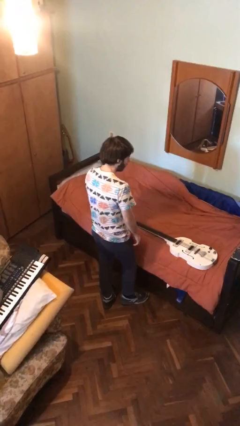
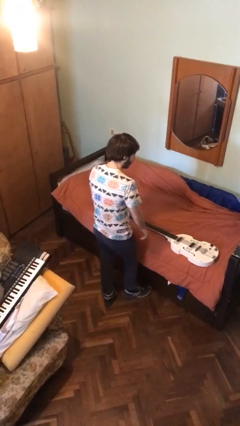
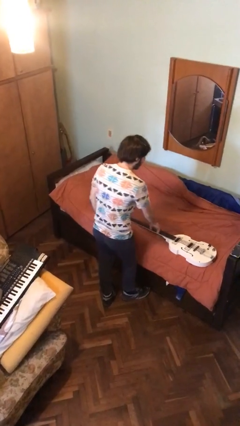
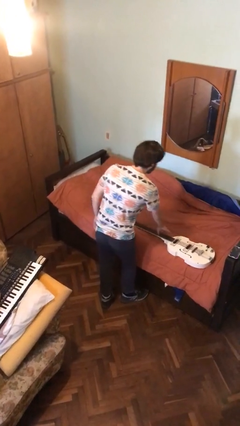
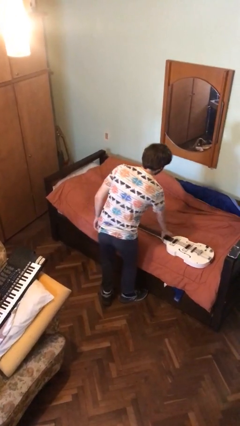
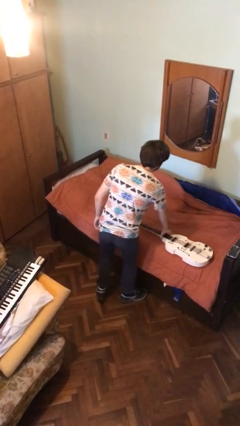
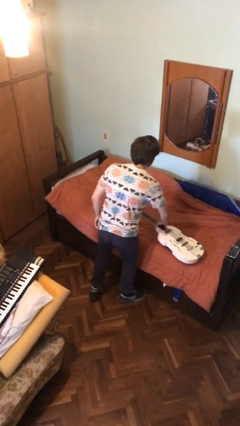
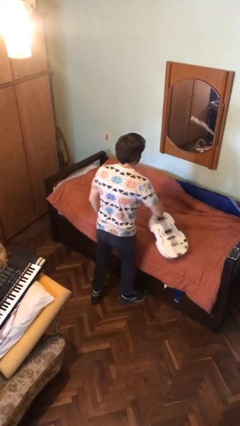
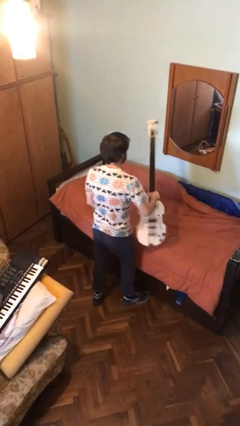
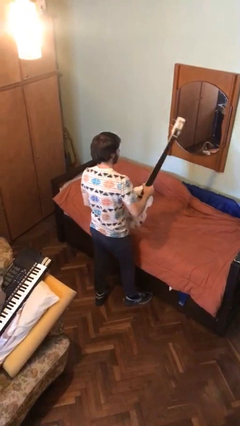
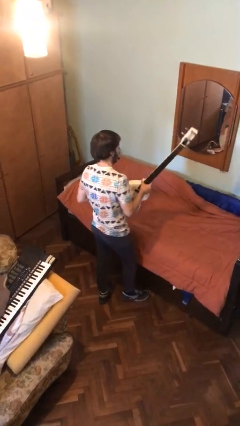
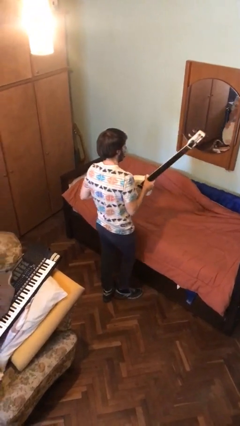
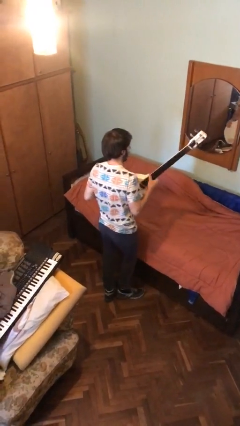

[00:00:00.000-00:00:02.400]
person picks up object from bed

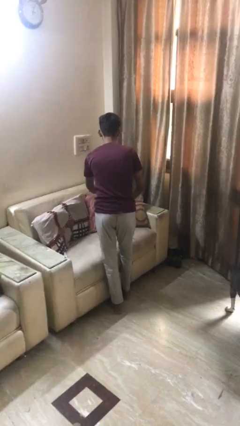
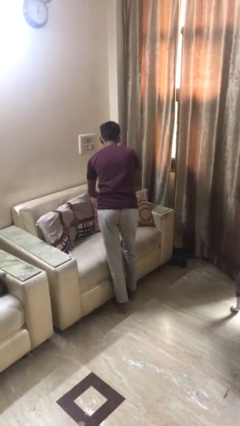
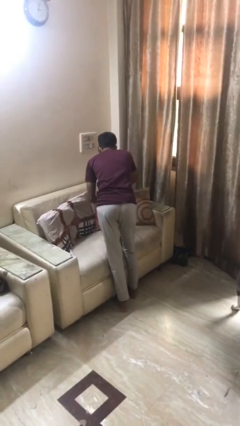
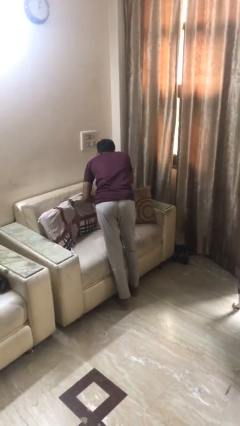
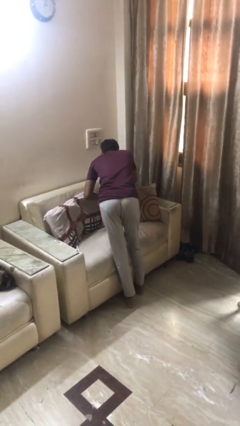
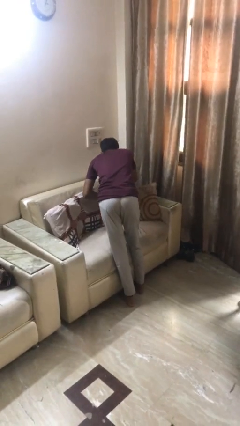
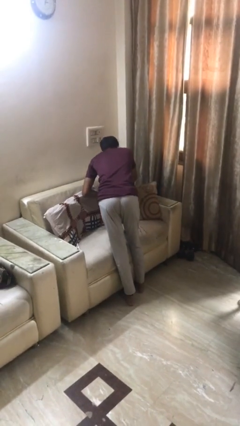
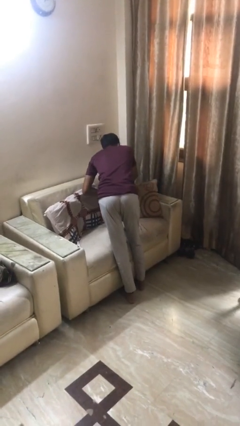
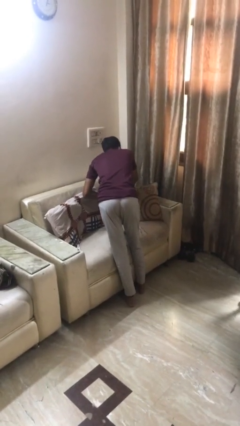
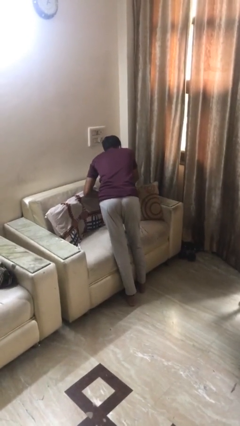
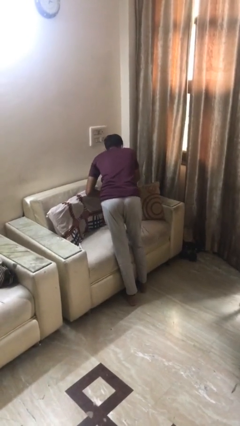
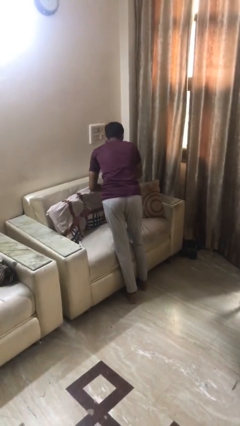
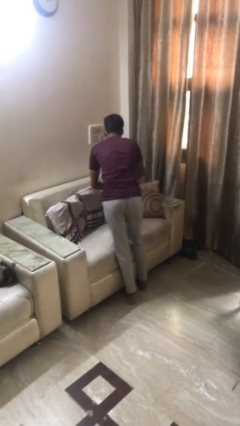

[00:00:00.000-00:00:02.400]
person searches in couch

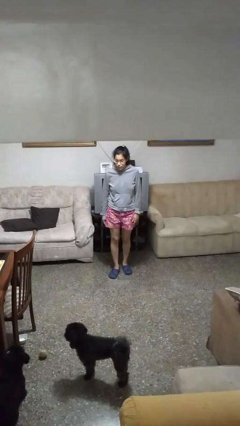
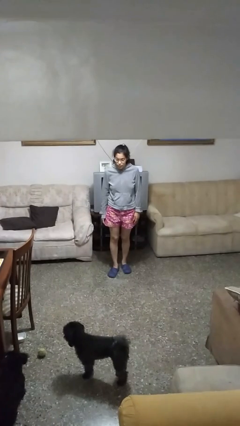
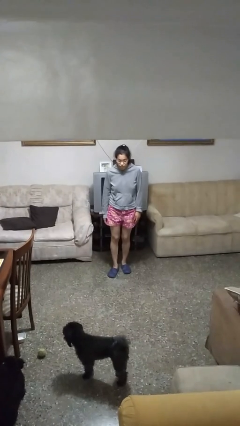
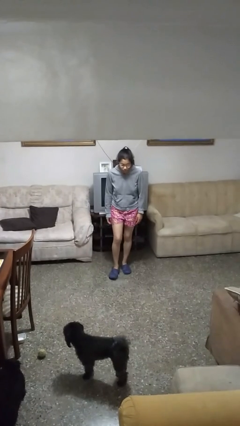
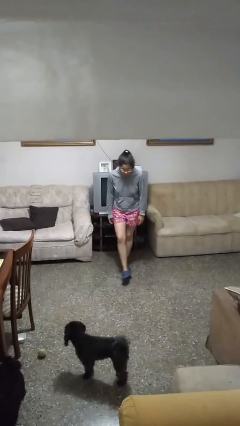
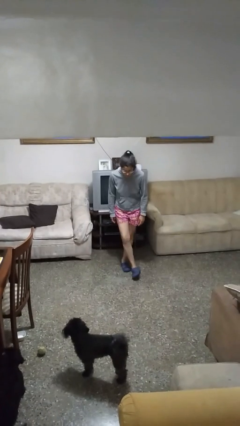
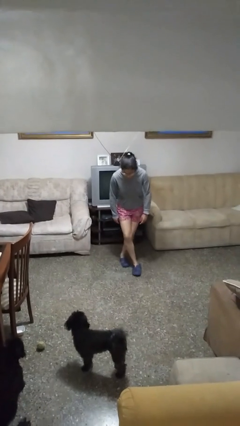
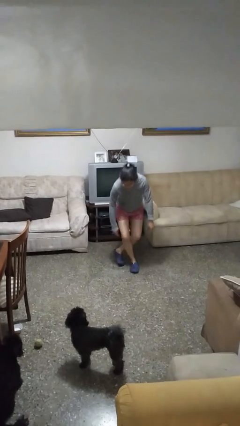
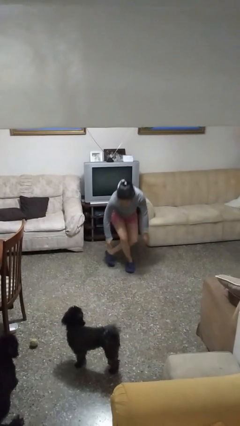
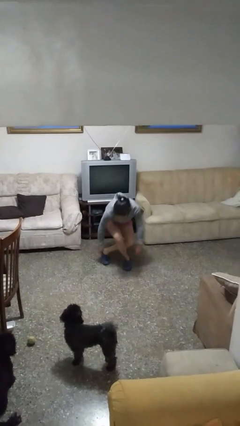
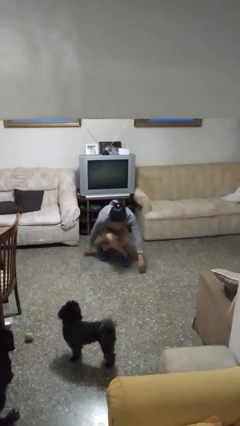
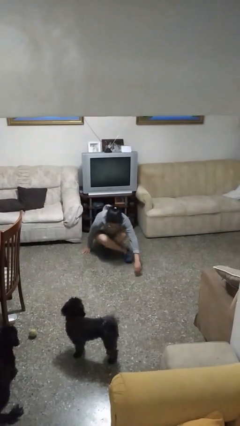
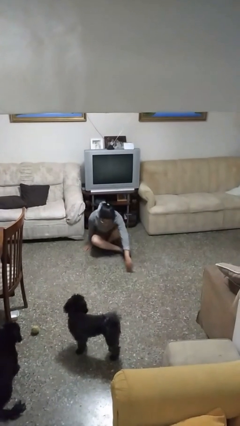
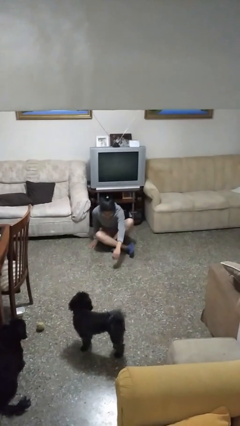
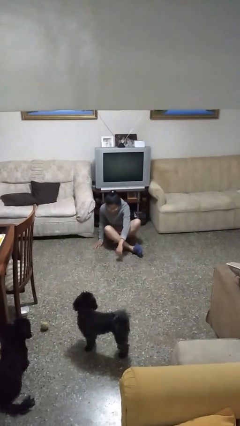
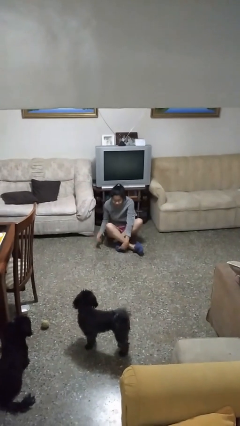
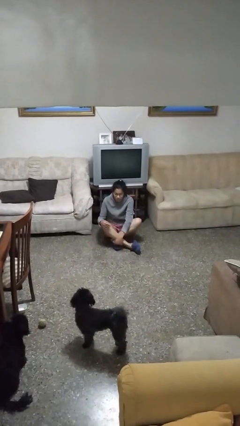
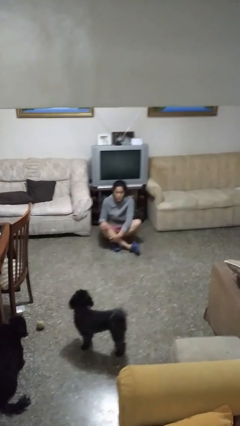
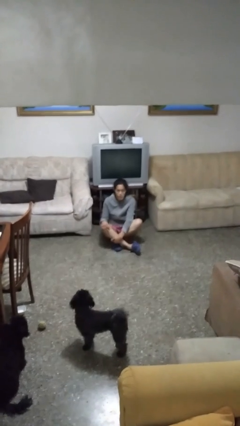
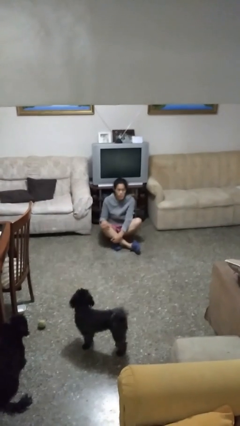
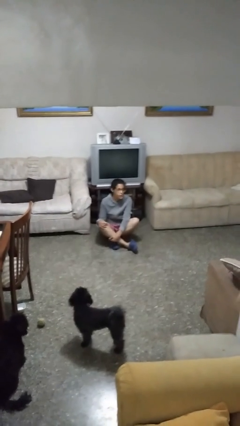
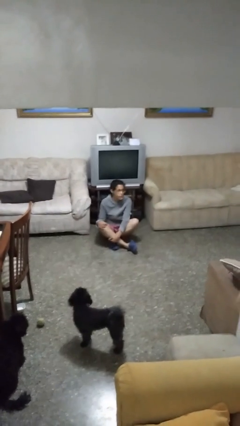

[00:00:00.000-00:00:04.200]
person sits crisscross

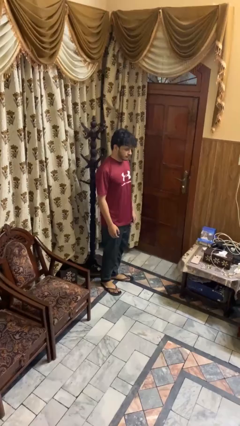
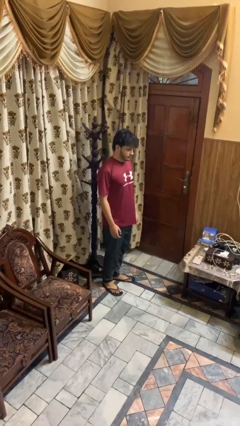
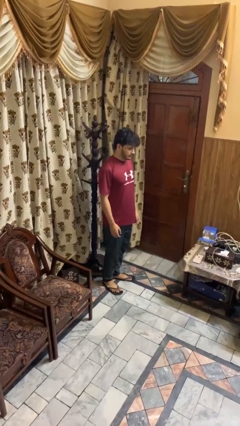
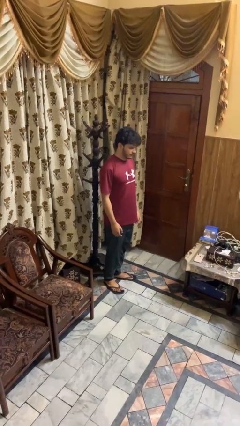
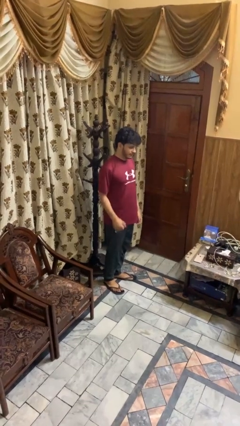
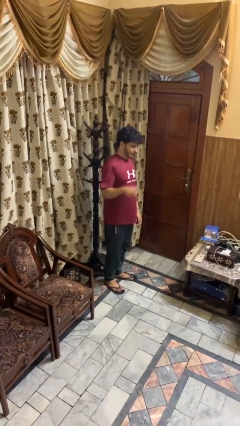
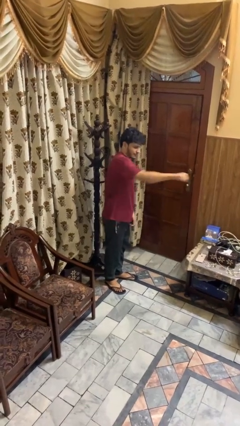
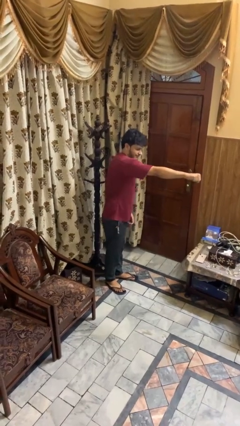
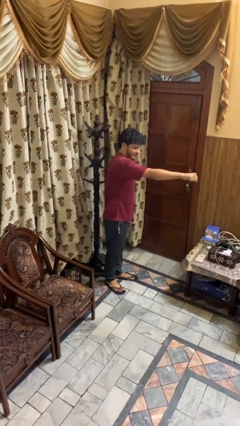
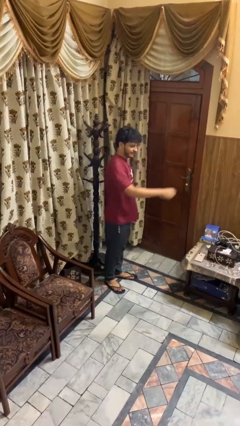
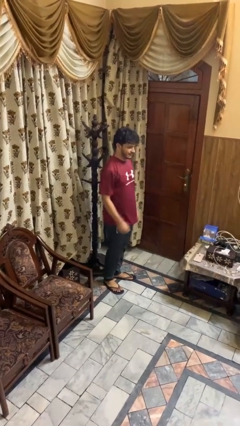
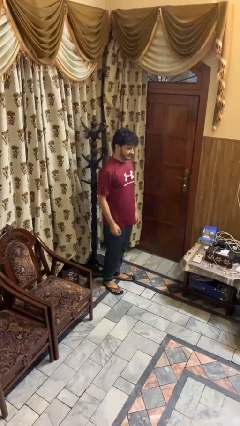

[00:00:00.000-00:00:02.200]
person karate chop

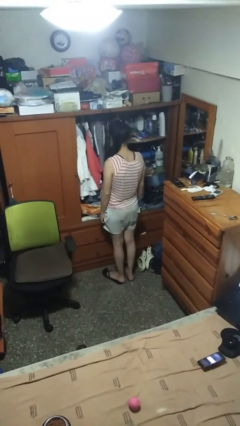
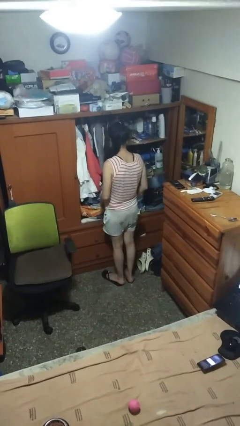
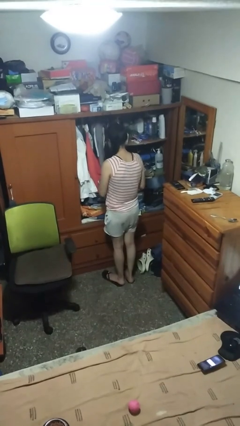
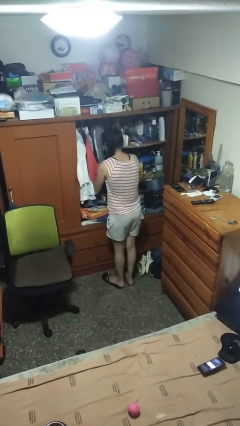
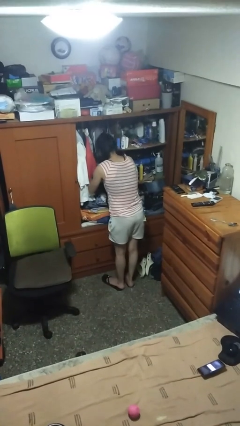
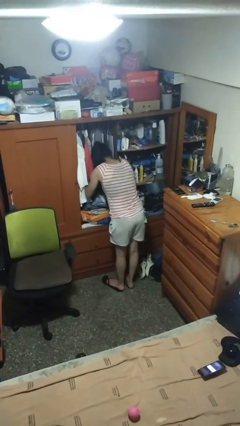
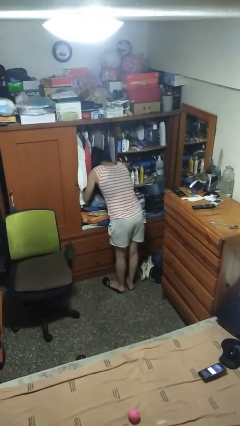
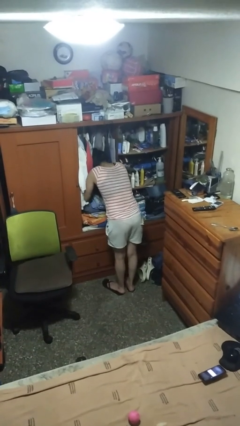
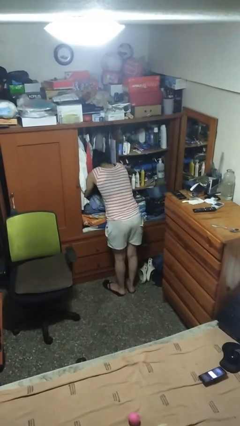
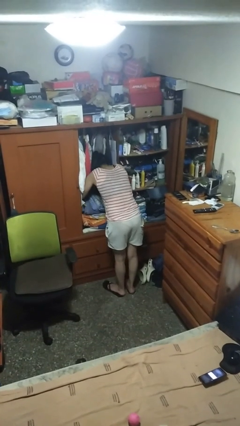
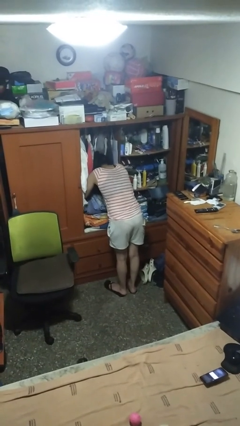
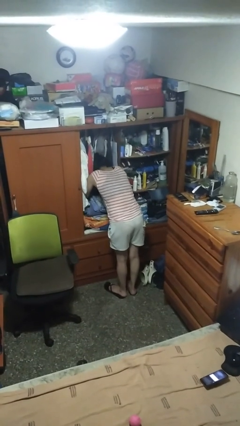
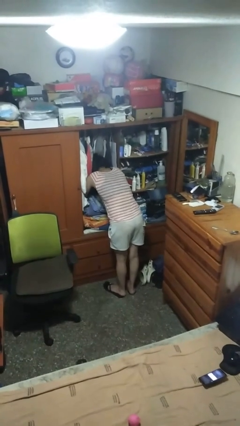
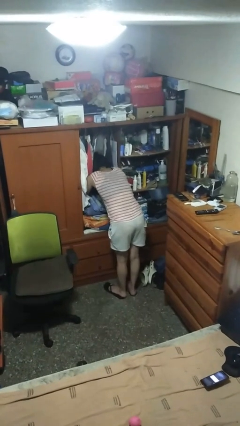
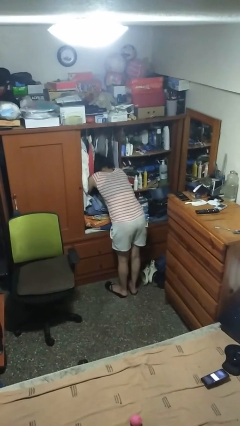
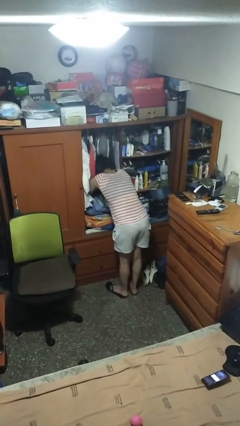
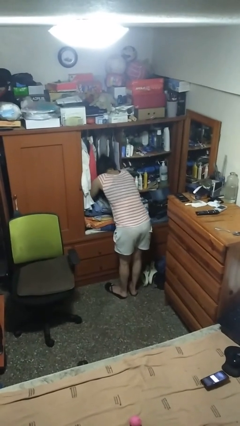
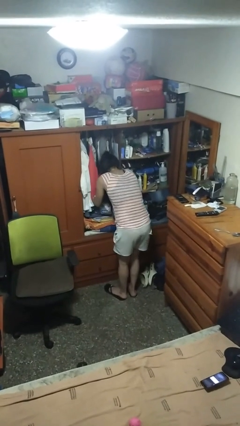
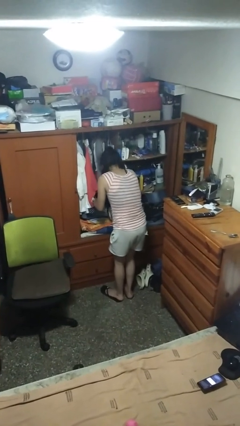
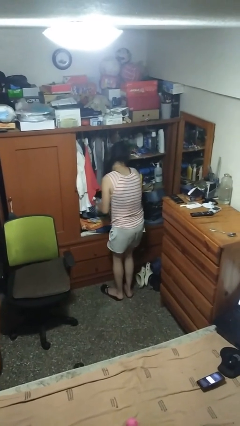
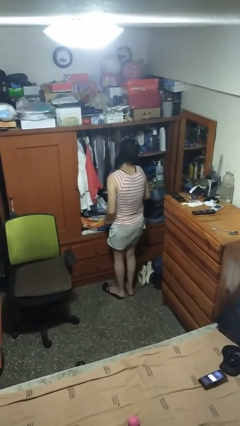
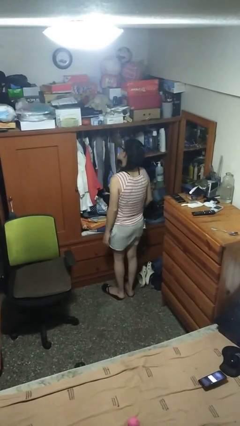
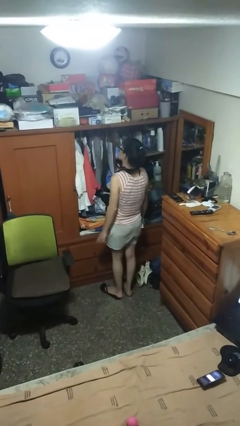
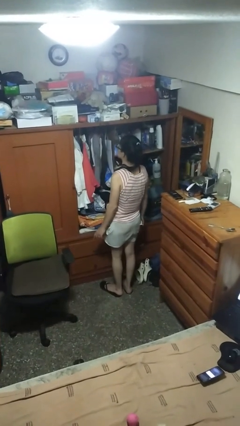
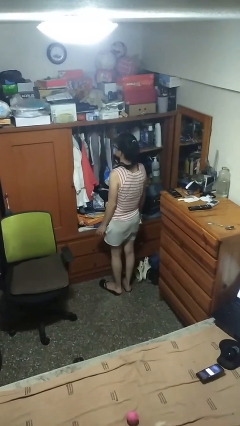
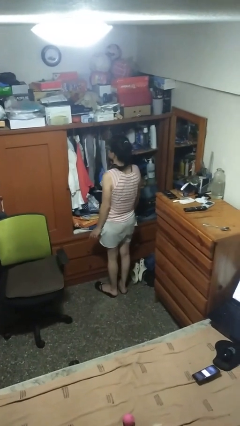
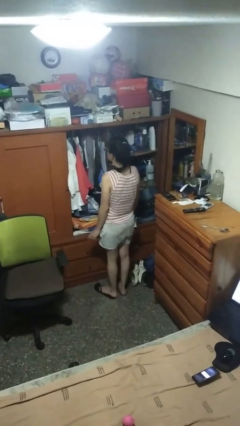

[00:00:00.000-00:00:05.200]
person searches in cabinet

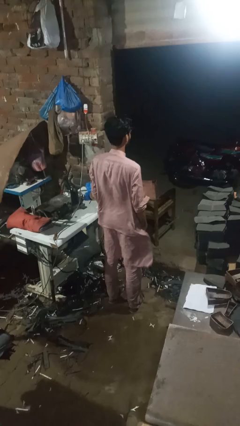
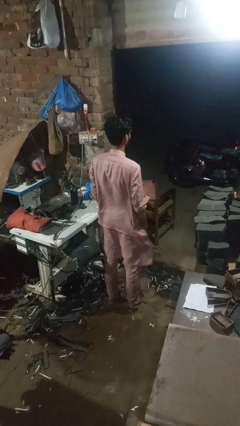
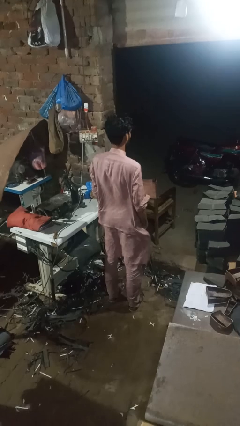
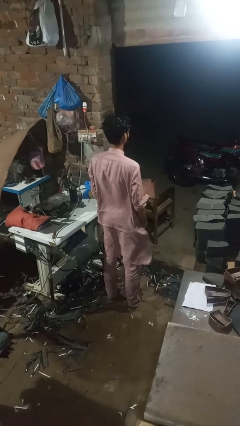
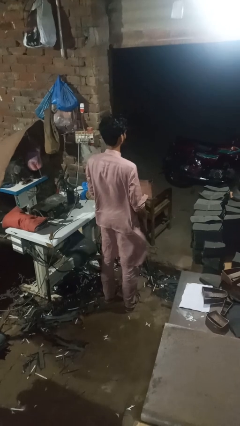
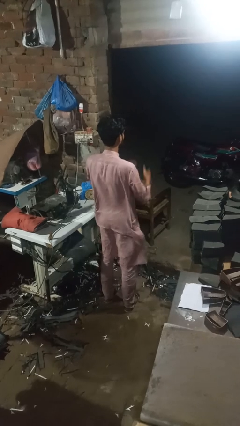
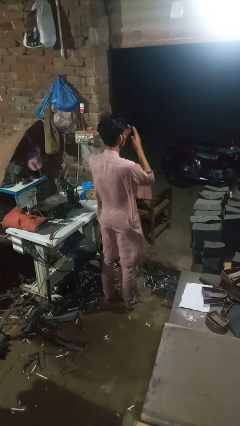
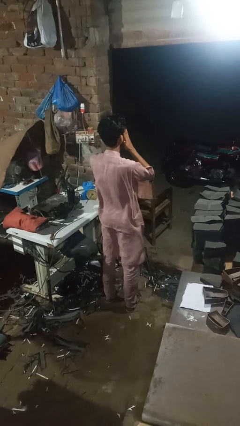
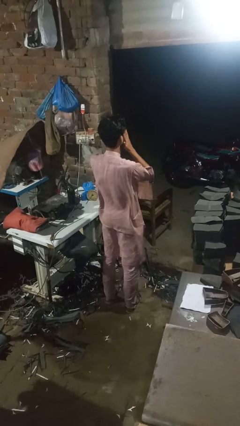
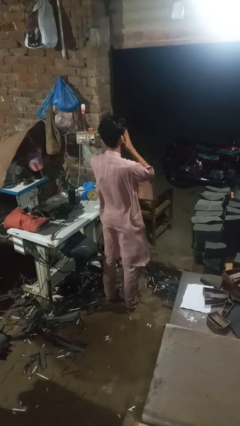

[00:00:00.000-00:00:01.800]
person sneezes into hand
